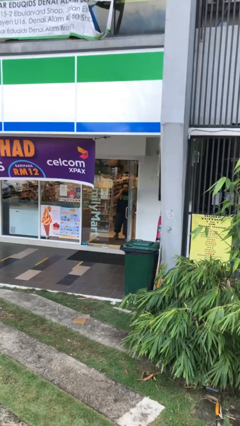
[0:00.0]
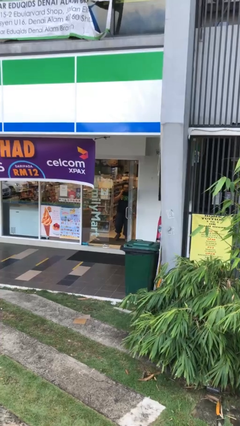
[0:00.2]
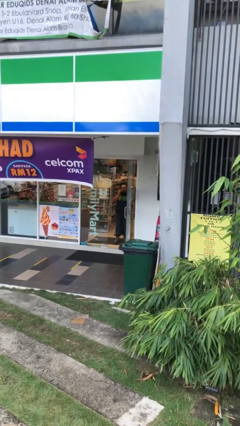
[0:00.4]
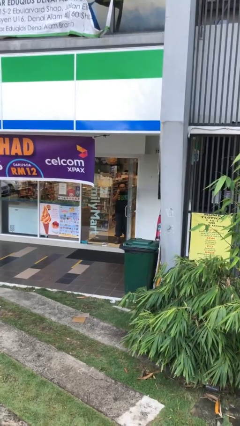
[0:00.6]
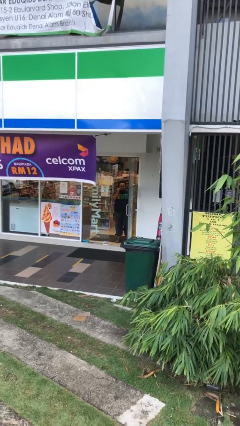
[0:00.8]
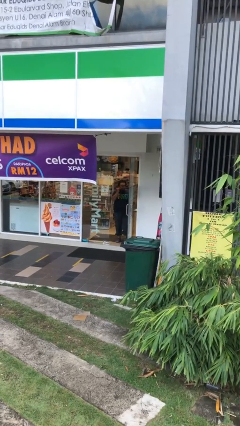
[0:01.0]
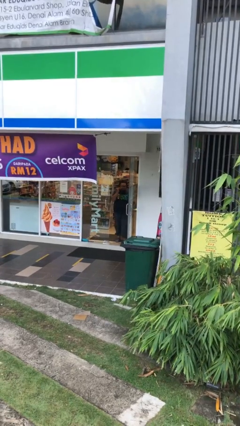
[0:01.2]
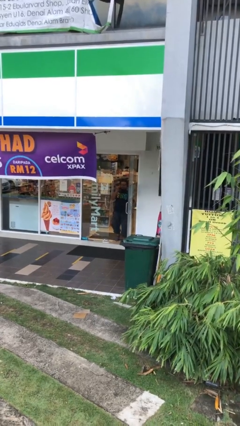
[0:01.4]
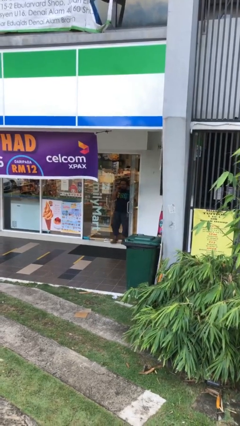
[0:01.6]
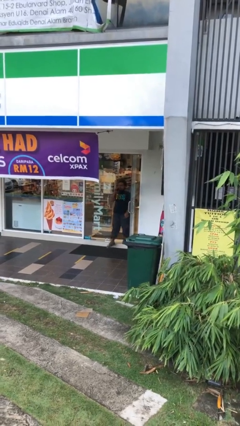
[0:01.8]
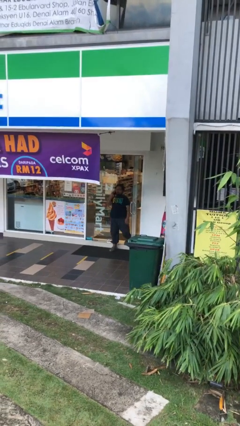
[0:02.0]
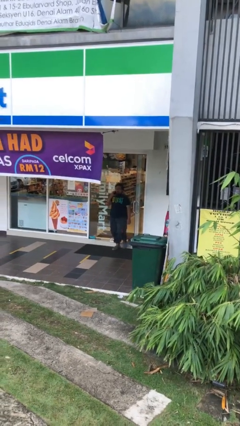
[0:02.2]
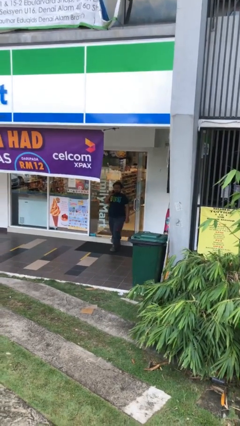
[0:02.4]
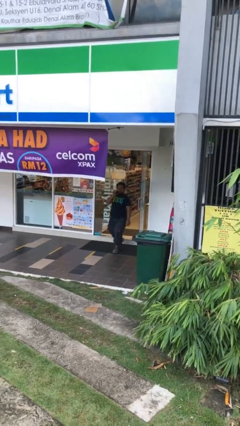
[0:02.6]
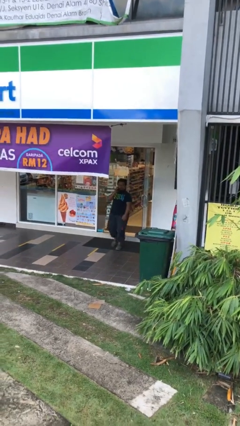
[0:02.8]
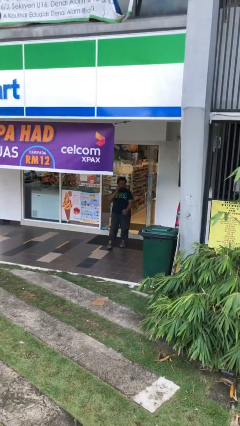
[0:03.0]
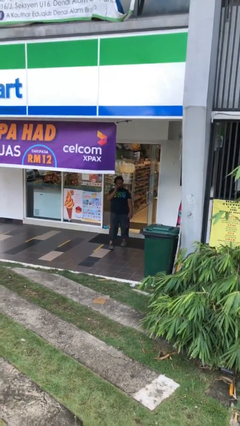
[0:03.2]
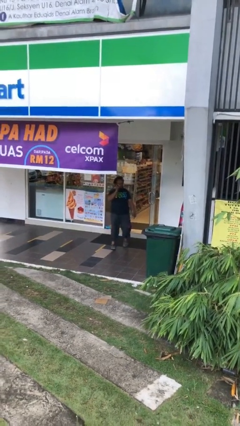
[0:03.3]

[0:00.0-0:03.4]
person enters scene through structure

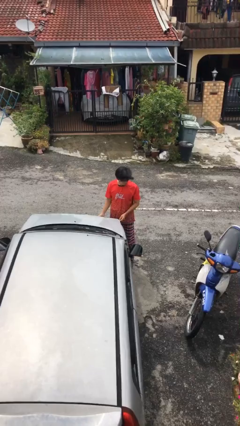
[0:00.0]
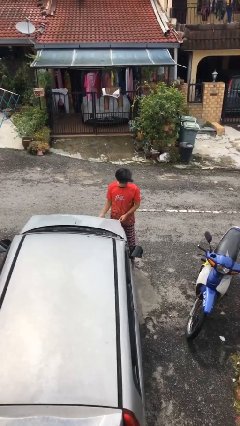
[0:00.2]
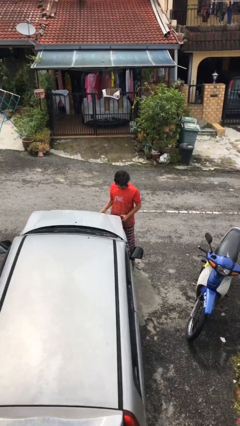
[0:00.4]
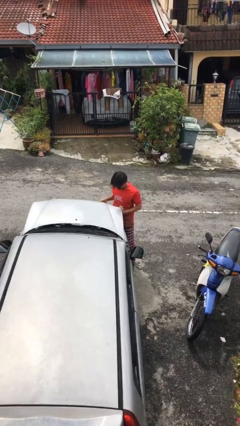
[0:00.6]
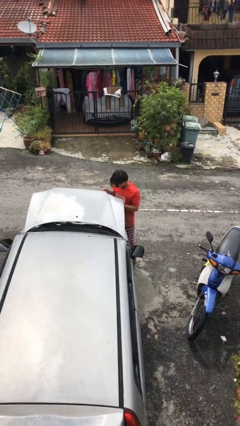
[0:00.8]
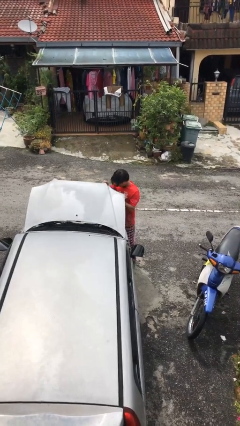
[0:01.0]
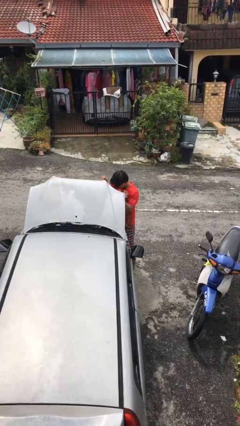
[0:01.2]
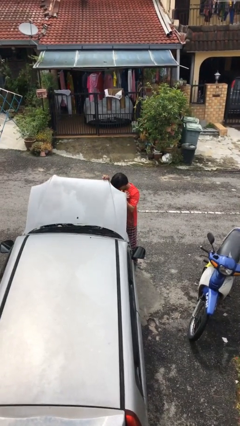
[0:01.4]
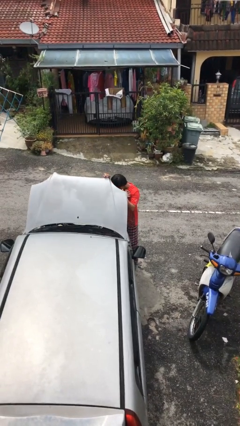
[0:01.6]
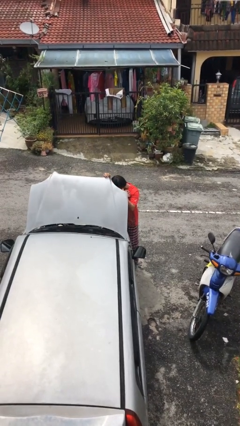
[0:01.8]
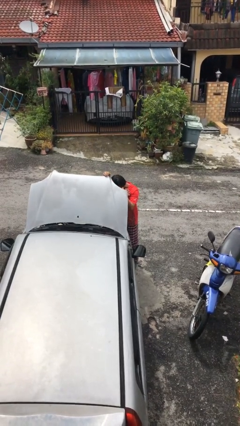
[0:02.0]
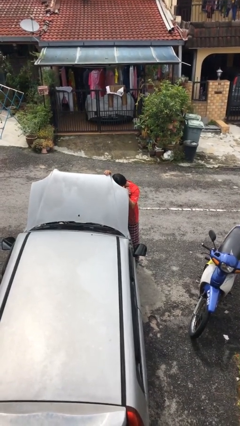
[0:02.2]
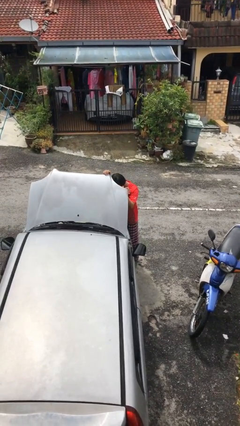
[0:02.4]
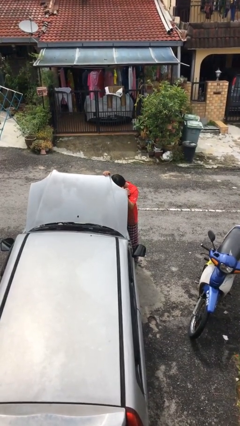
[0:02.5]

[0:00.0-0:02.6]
person opens car hood

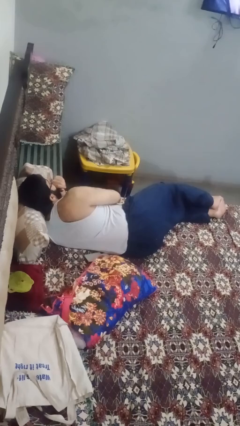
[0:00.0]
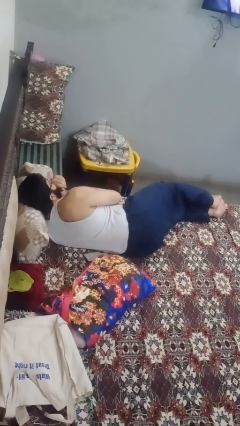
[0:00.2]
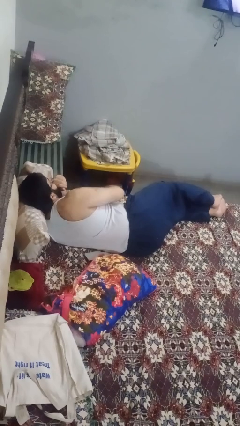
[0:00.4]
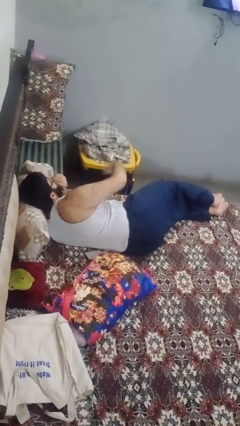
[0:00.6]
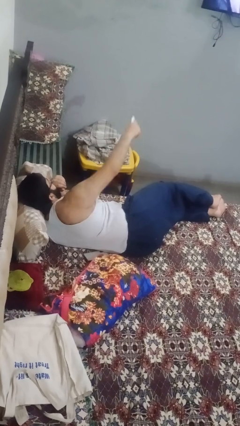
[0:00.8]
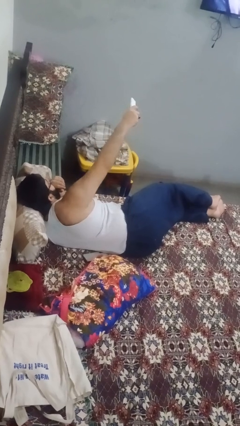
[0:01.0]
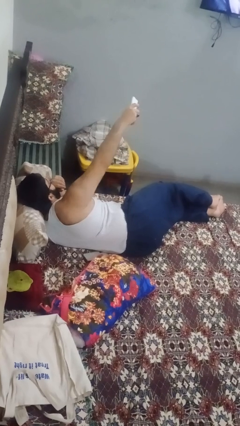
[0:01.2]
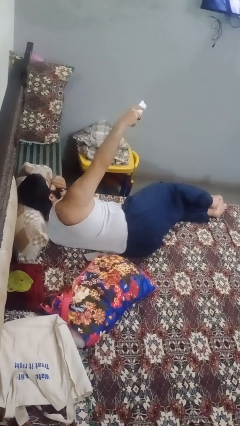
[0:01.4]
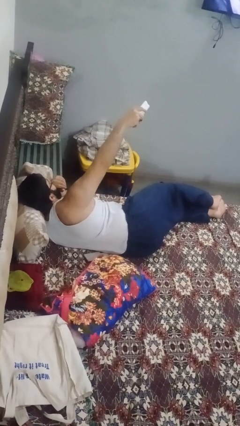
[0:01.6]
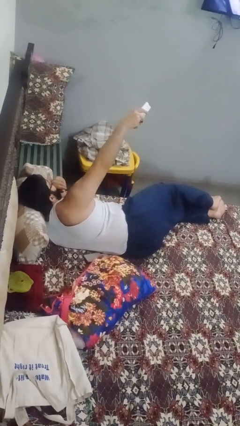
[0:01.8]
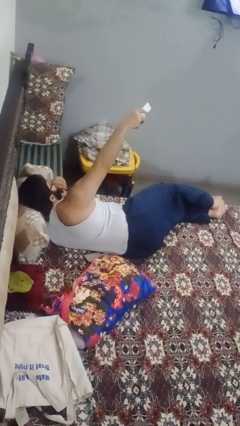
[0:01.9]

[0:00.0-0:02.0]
person uses television remote

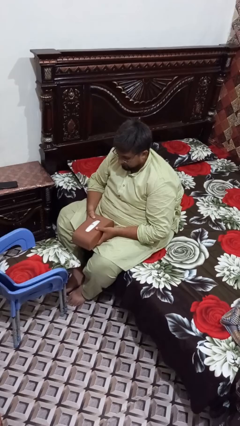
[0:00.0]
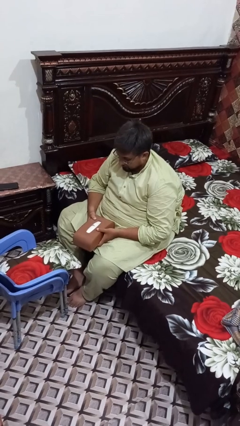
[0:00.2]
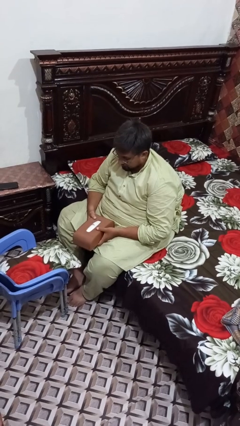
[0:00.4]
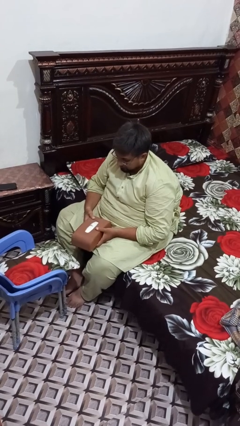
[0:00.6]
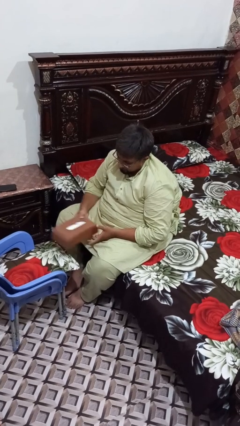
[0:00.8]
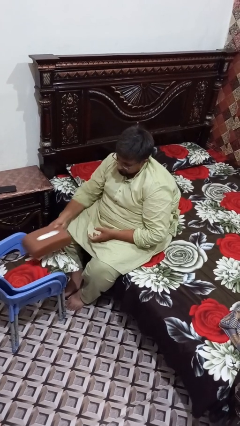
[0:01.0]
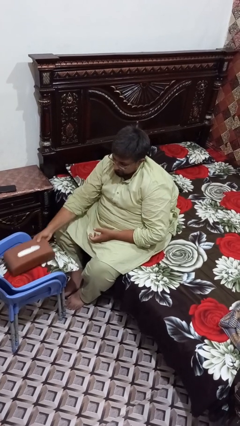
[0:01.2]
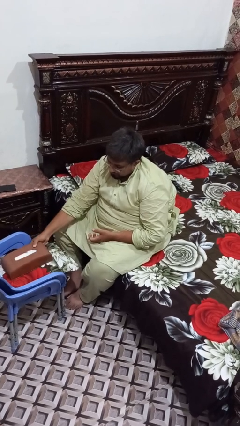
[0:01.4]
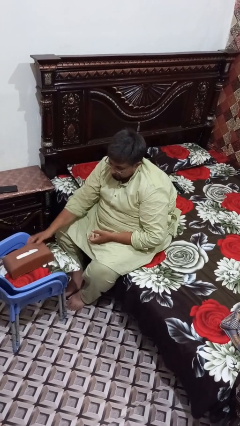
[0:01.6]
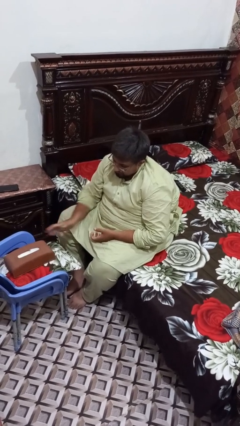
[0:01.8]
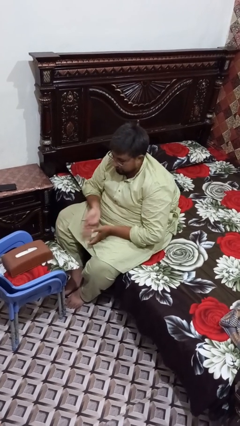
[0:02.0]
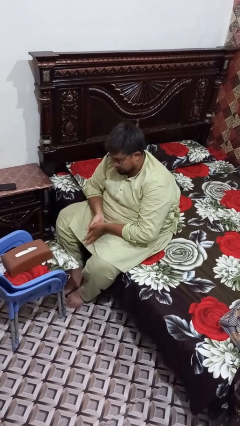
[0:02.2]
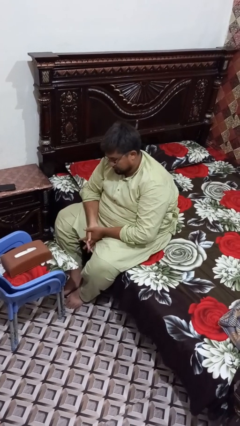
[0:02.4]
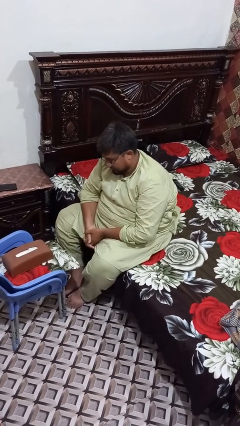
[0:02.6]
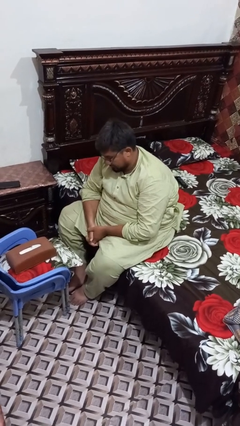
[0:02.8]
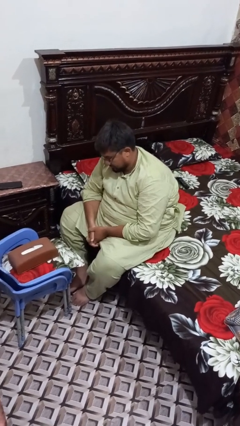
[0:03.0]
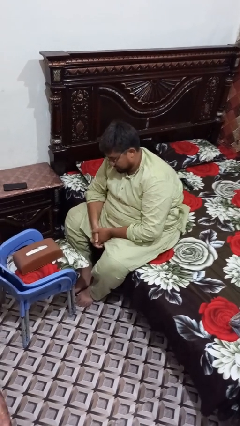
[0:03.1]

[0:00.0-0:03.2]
person puts down object on couch

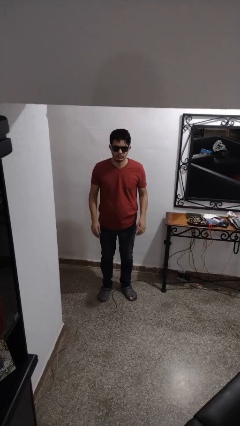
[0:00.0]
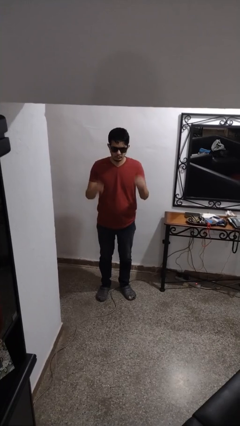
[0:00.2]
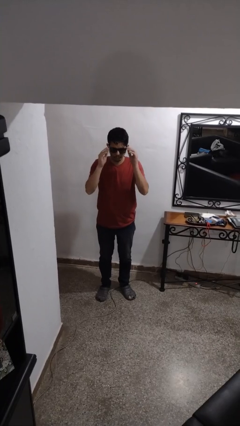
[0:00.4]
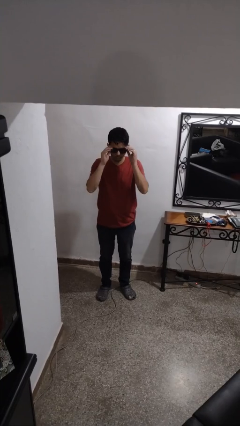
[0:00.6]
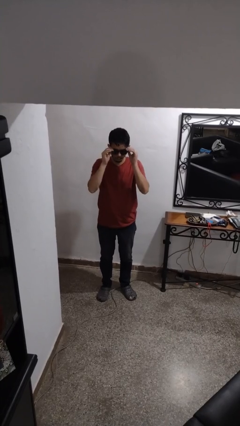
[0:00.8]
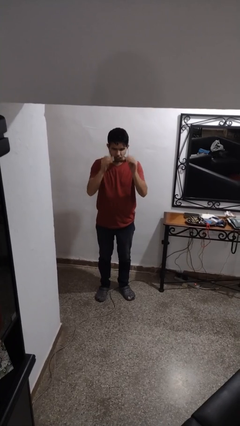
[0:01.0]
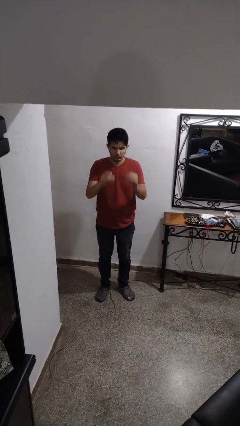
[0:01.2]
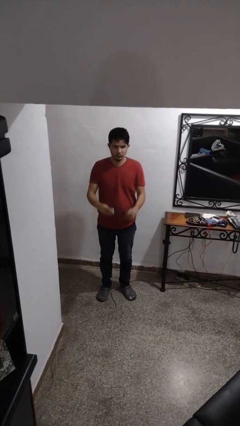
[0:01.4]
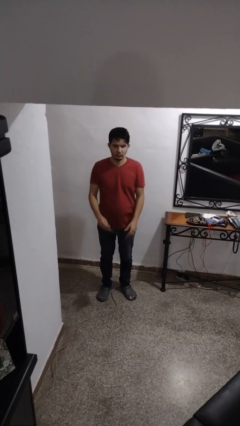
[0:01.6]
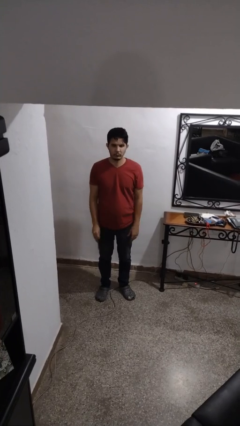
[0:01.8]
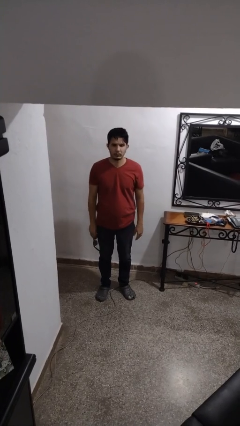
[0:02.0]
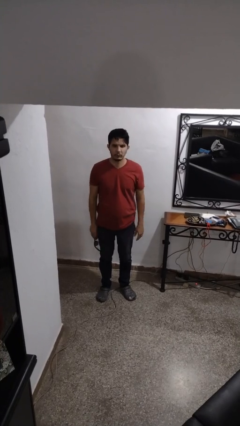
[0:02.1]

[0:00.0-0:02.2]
person takes off sunglasses

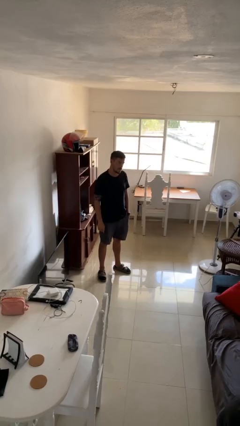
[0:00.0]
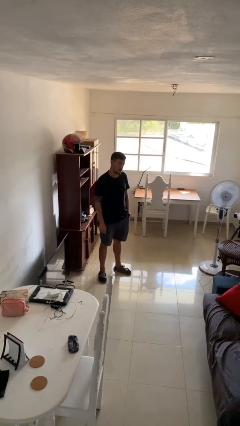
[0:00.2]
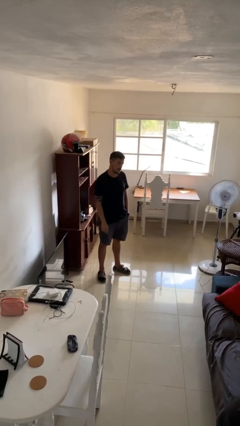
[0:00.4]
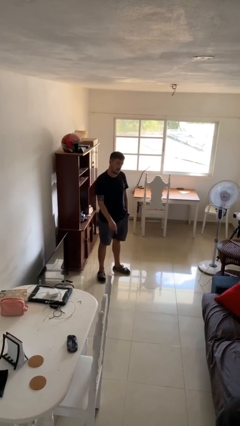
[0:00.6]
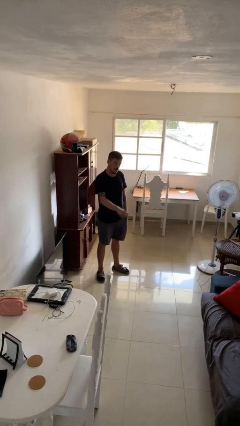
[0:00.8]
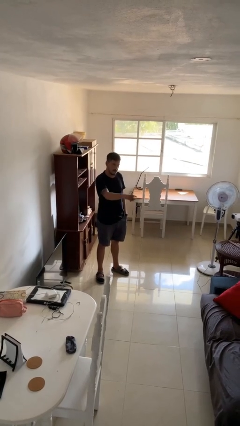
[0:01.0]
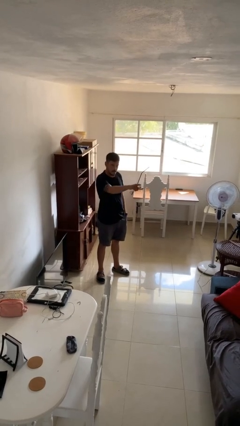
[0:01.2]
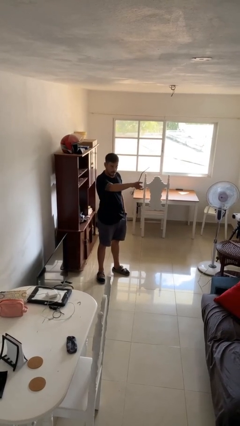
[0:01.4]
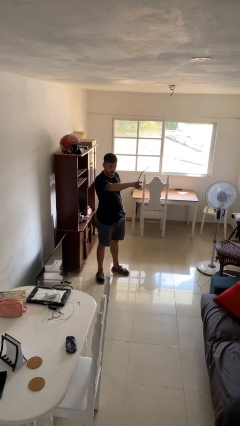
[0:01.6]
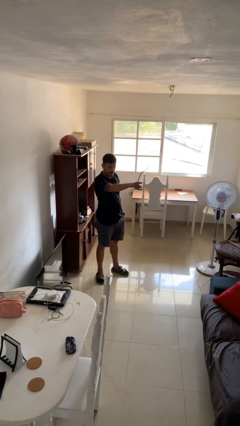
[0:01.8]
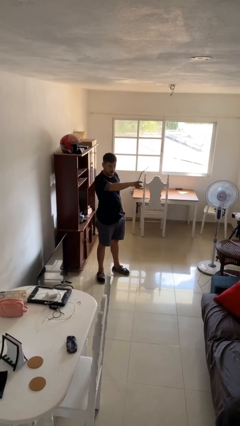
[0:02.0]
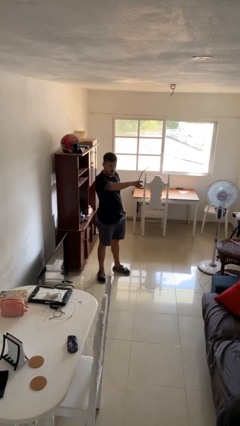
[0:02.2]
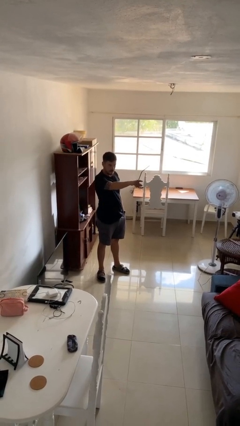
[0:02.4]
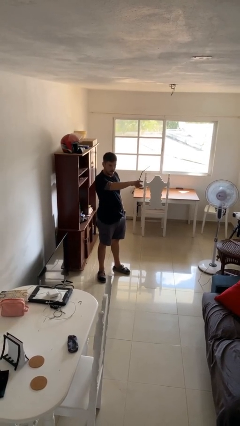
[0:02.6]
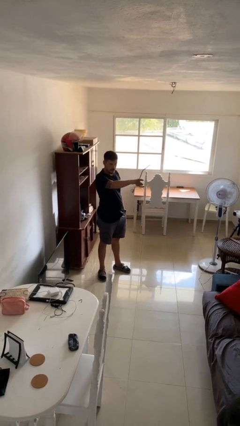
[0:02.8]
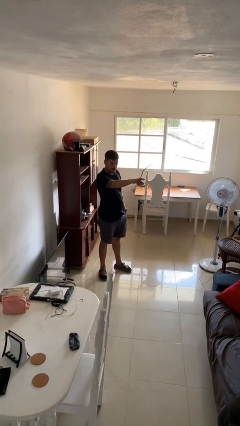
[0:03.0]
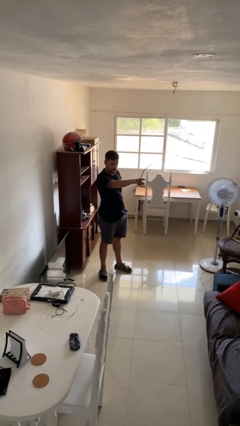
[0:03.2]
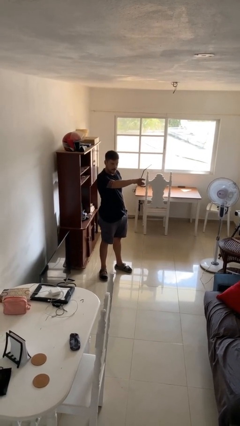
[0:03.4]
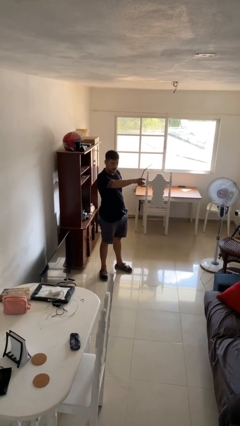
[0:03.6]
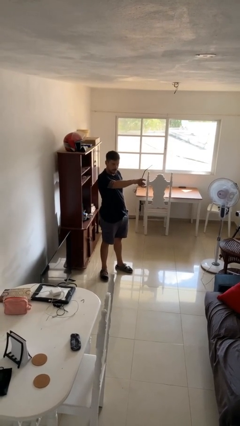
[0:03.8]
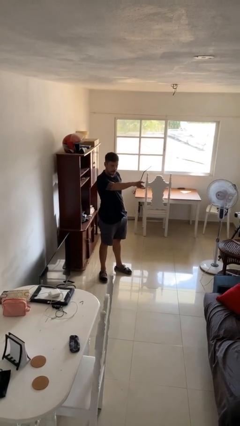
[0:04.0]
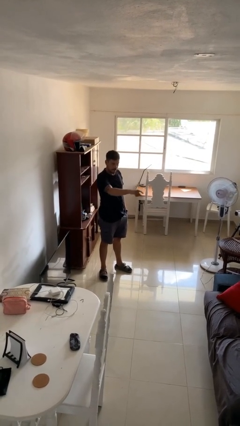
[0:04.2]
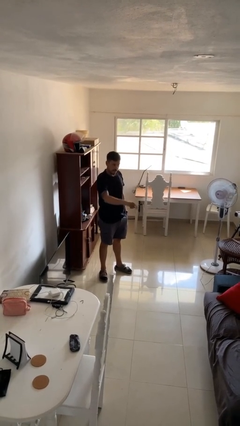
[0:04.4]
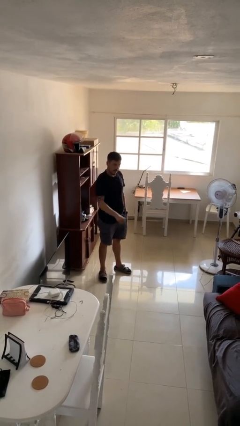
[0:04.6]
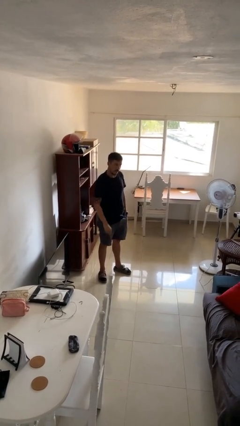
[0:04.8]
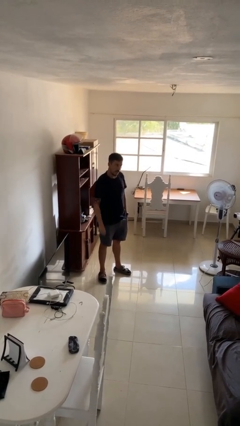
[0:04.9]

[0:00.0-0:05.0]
person points at person
